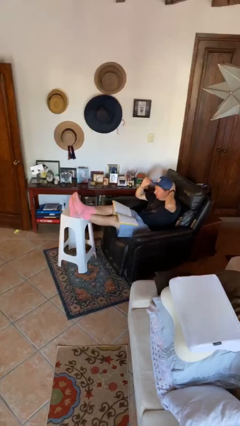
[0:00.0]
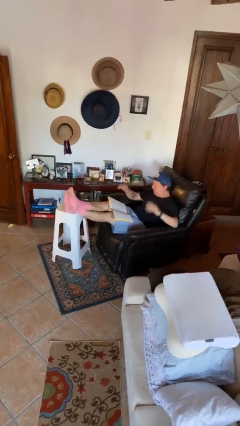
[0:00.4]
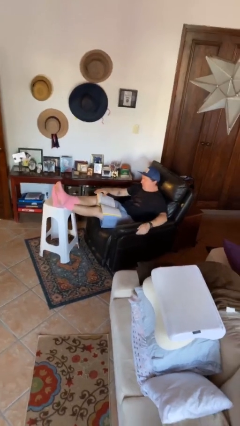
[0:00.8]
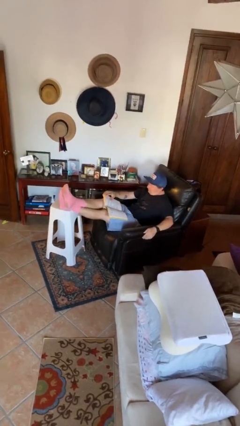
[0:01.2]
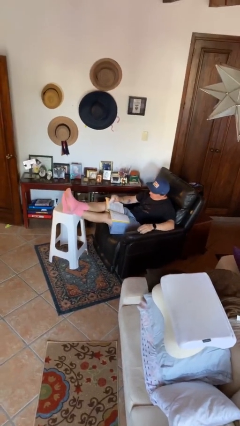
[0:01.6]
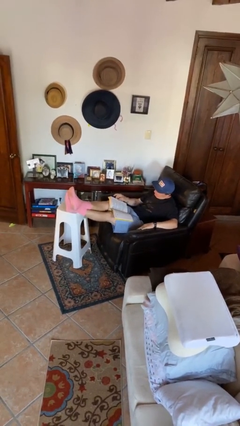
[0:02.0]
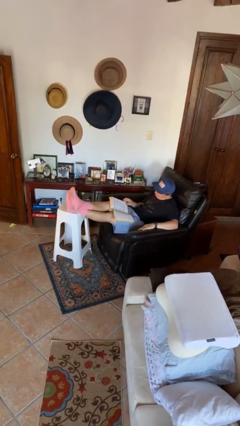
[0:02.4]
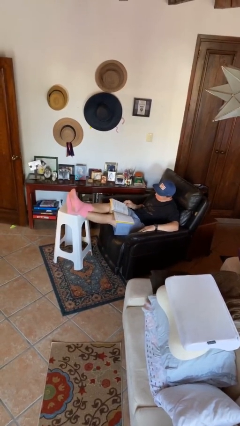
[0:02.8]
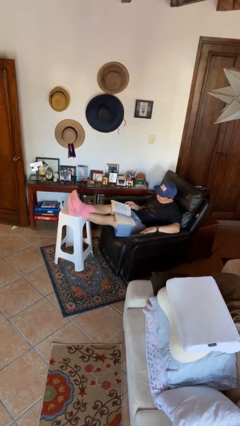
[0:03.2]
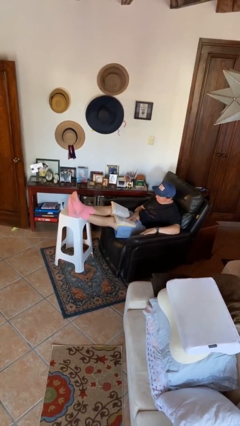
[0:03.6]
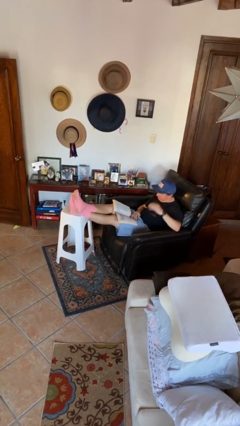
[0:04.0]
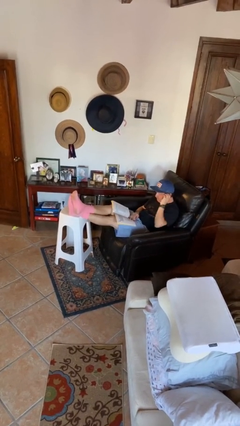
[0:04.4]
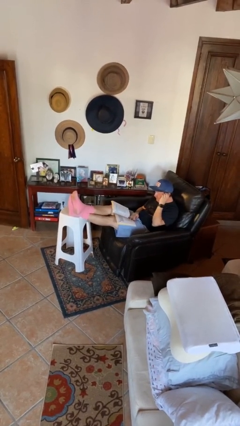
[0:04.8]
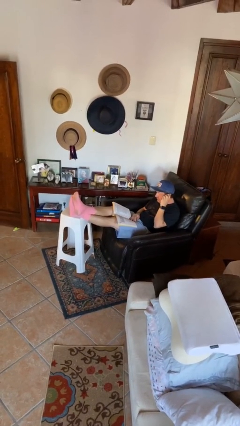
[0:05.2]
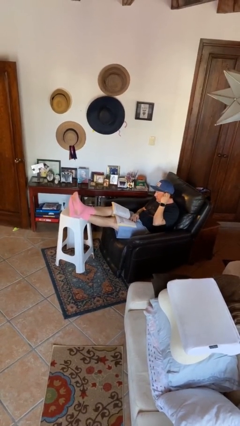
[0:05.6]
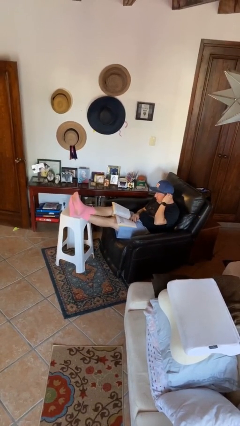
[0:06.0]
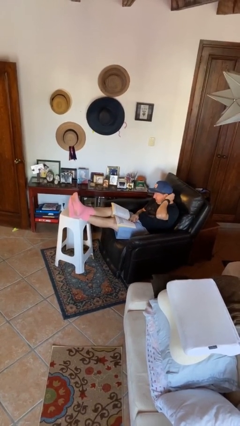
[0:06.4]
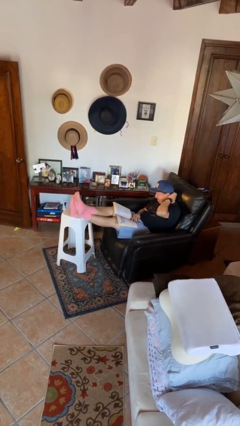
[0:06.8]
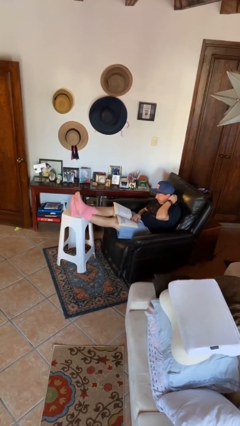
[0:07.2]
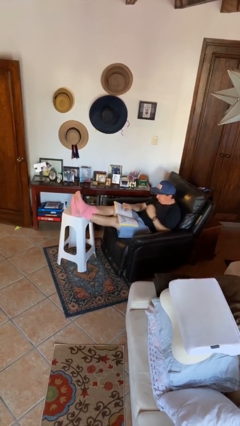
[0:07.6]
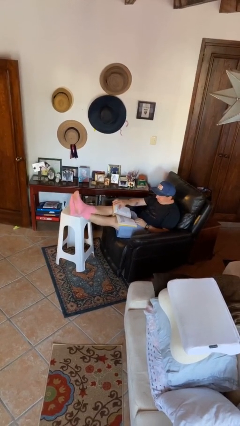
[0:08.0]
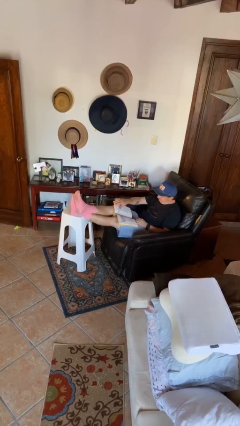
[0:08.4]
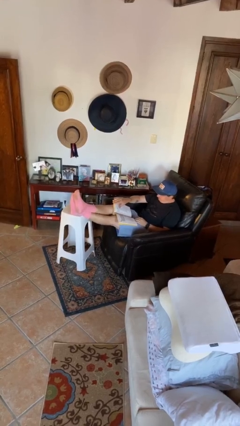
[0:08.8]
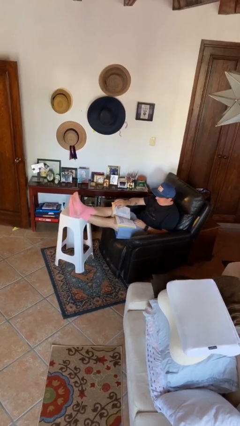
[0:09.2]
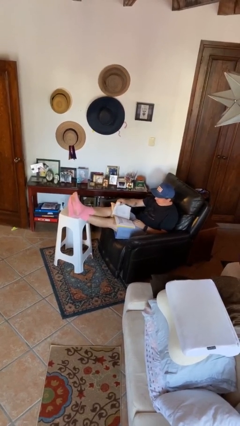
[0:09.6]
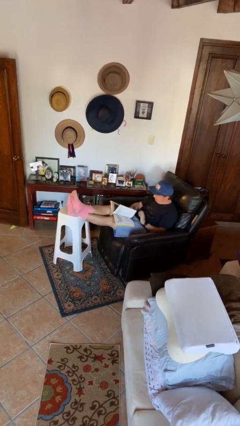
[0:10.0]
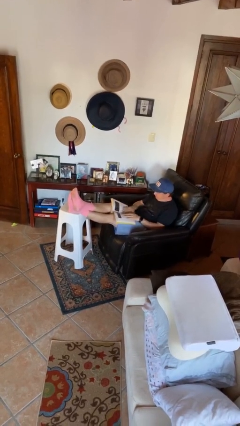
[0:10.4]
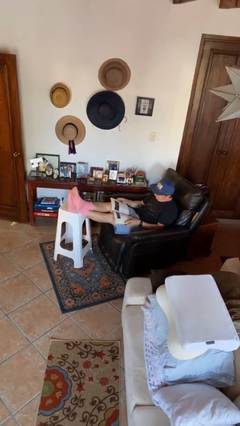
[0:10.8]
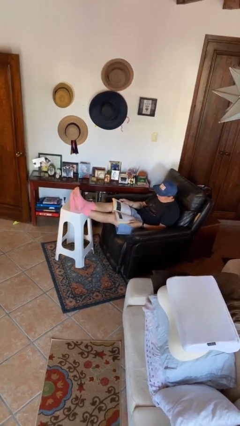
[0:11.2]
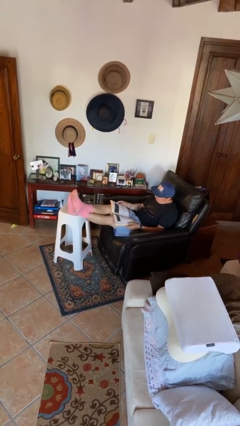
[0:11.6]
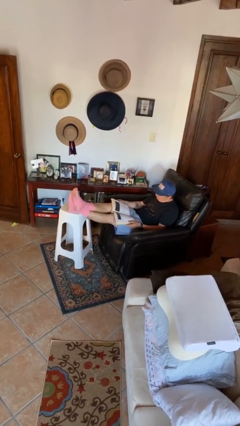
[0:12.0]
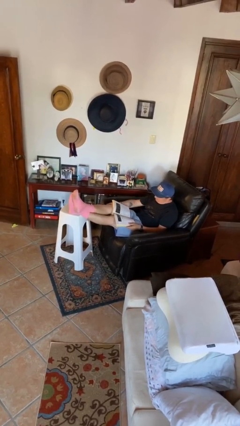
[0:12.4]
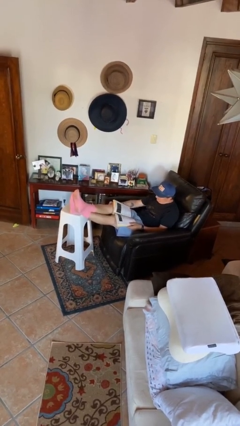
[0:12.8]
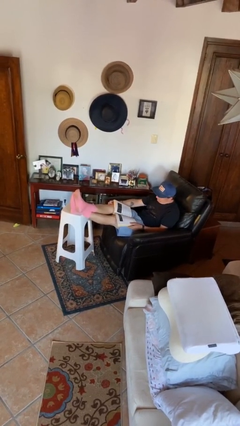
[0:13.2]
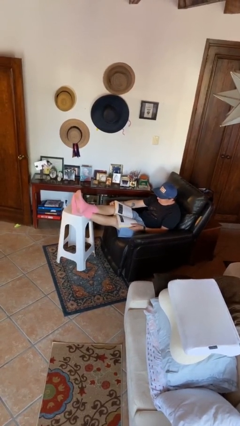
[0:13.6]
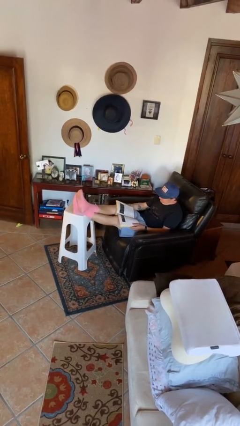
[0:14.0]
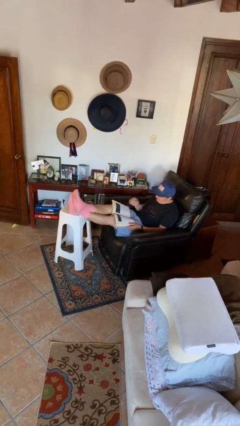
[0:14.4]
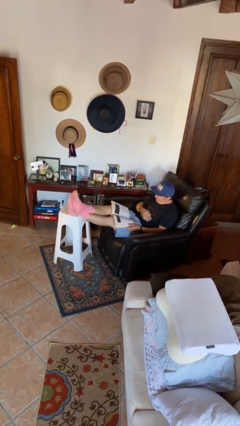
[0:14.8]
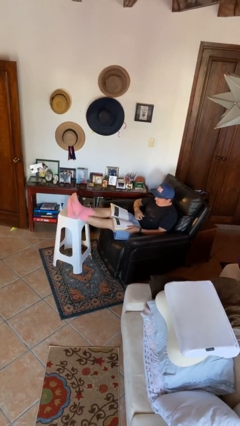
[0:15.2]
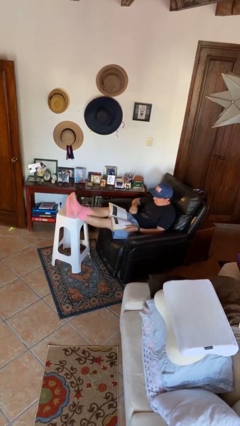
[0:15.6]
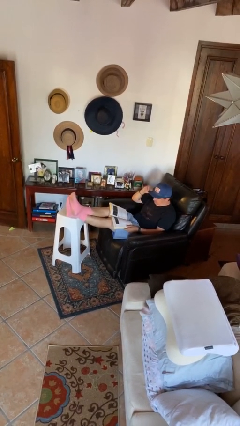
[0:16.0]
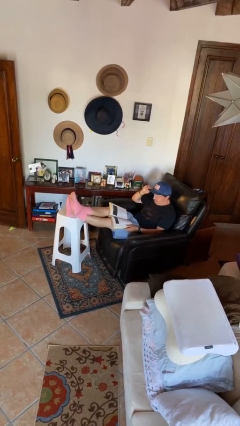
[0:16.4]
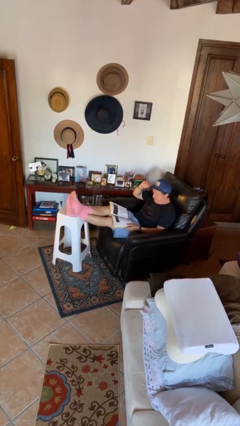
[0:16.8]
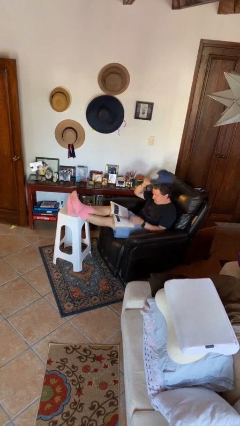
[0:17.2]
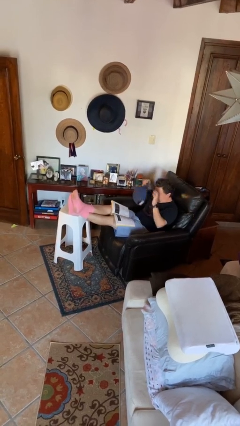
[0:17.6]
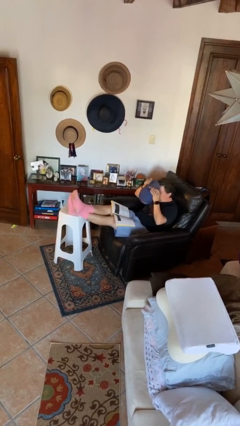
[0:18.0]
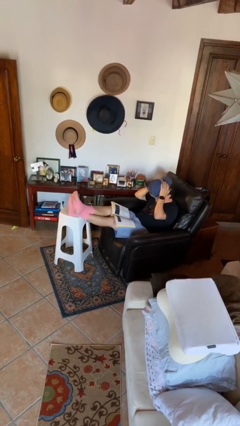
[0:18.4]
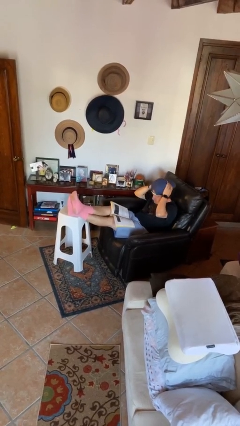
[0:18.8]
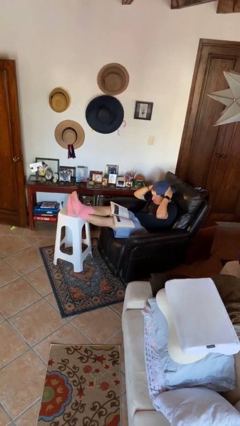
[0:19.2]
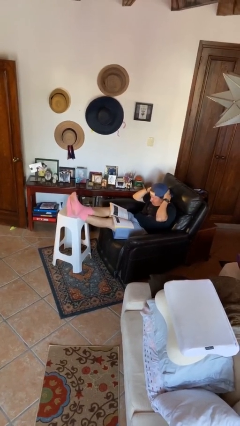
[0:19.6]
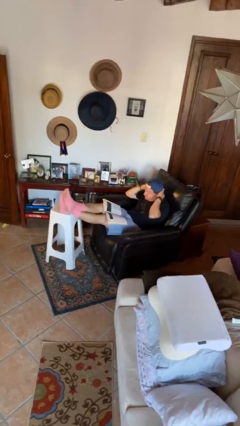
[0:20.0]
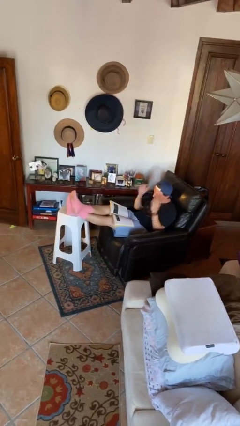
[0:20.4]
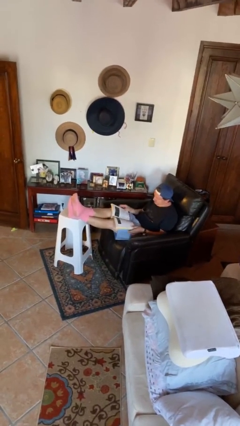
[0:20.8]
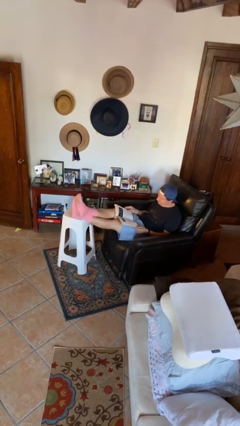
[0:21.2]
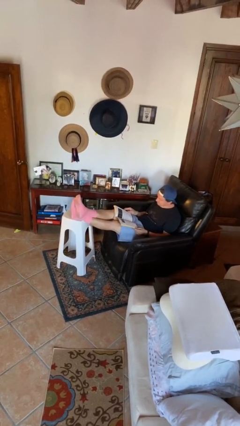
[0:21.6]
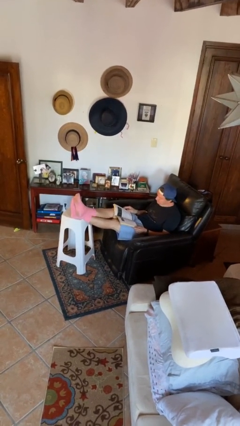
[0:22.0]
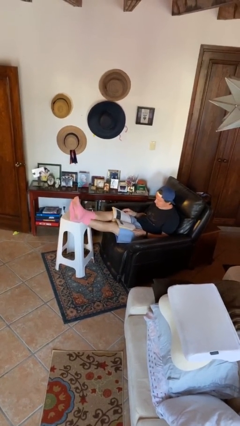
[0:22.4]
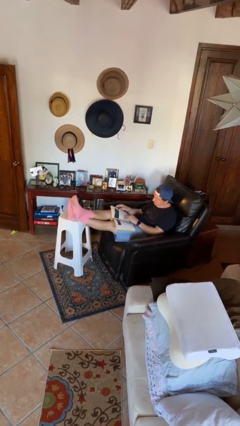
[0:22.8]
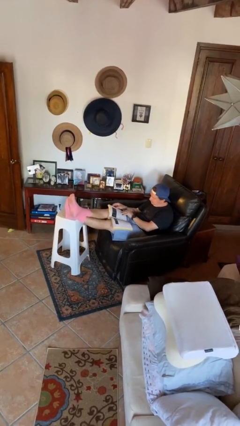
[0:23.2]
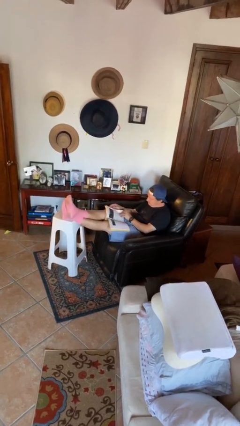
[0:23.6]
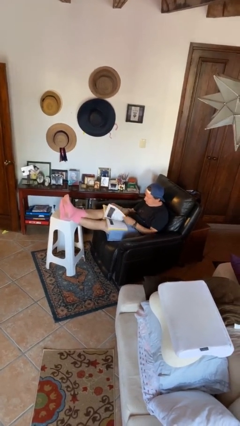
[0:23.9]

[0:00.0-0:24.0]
person reads document

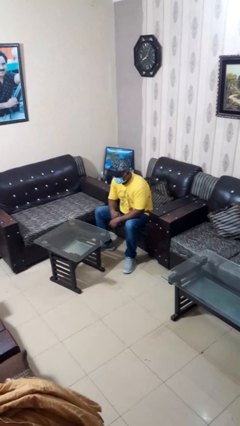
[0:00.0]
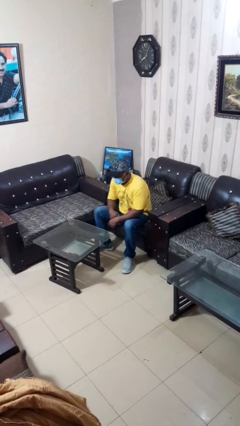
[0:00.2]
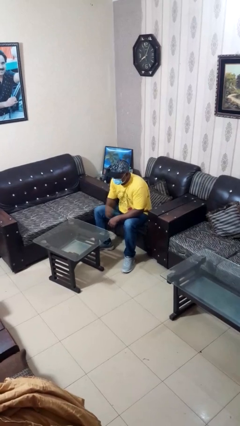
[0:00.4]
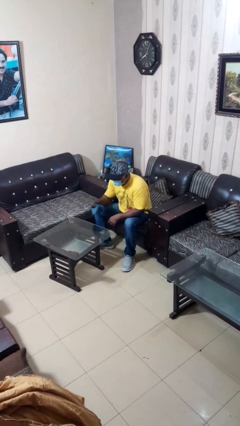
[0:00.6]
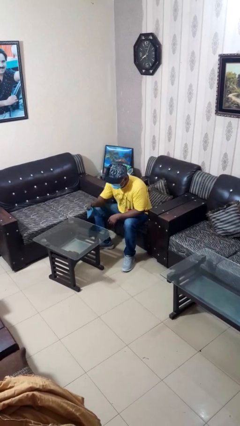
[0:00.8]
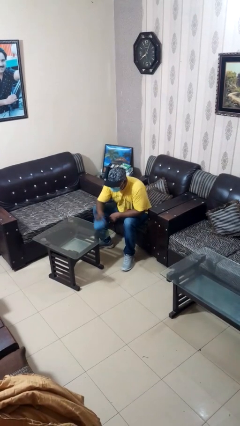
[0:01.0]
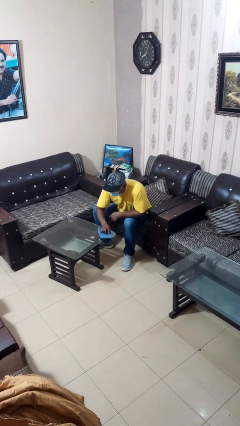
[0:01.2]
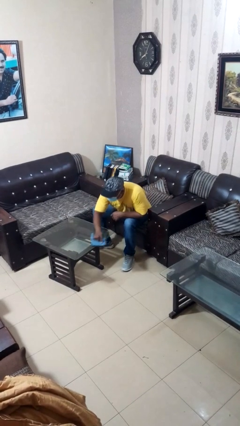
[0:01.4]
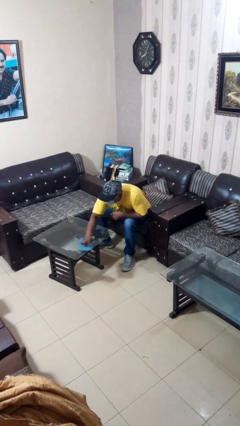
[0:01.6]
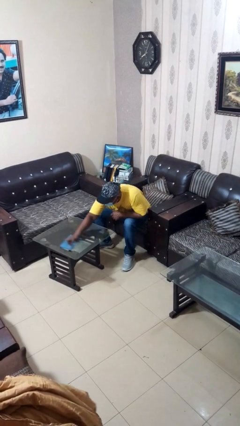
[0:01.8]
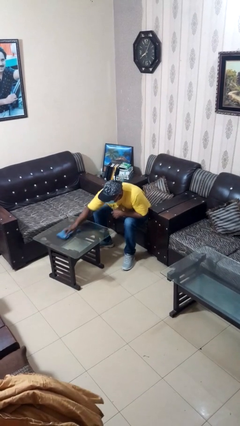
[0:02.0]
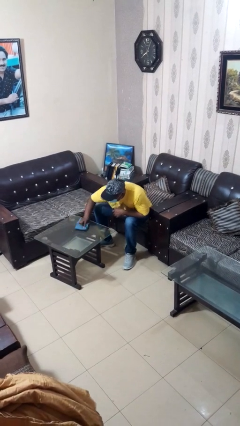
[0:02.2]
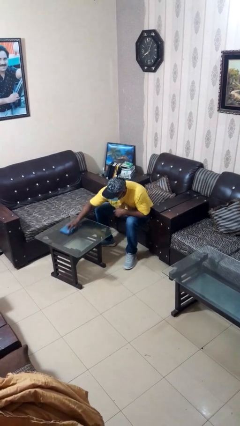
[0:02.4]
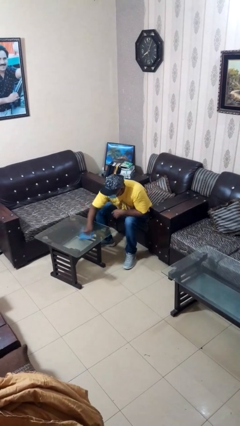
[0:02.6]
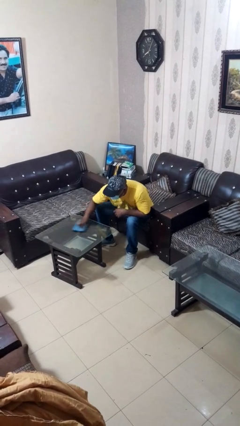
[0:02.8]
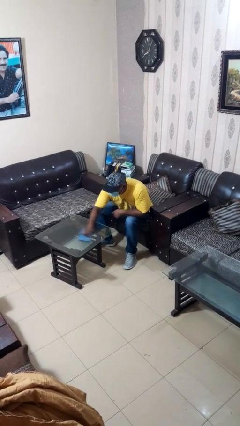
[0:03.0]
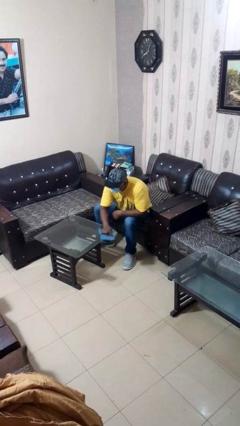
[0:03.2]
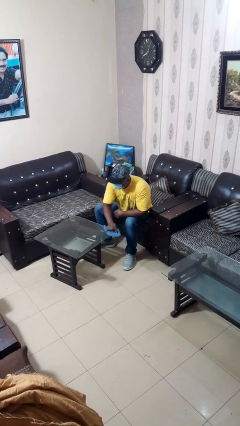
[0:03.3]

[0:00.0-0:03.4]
person cleans table with rag

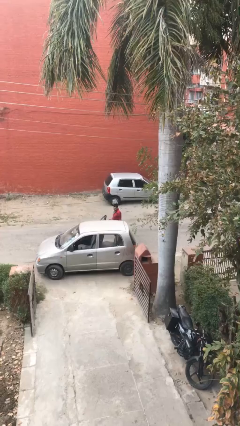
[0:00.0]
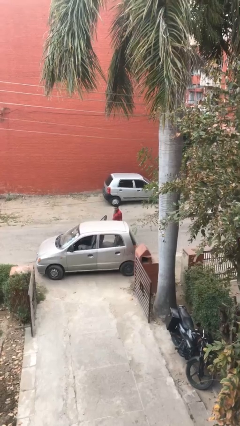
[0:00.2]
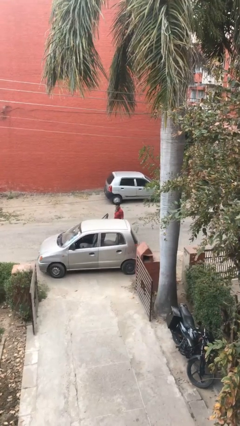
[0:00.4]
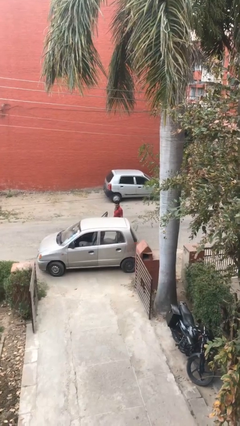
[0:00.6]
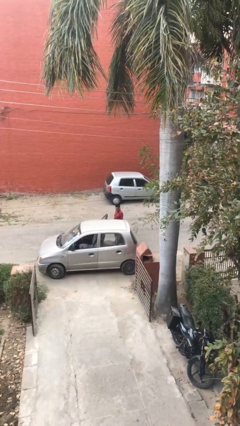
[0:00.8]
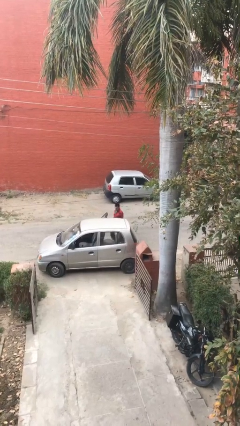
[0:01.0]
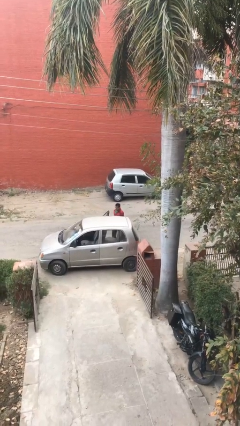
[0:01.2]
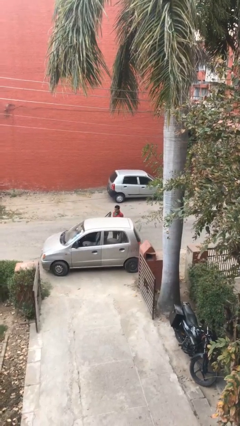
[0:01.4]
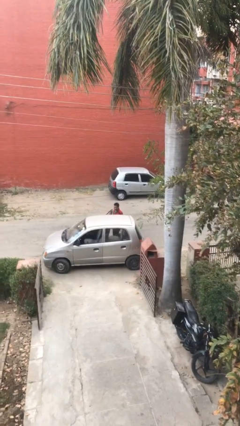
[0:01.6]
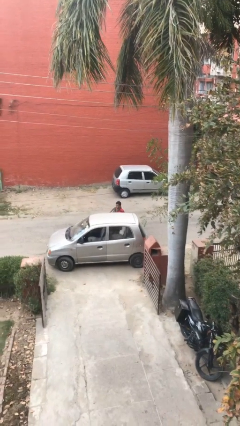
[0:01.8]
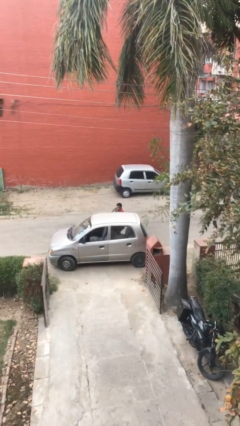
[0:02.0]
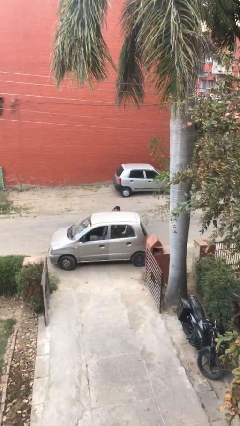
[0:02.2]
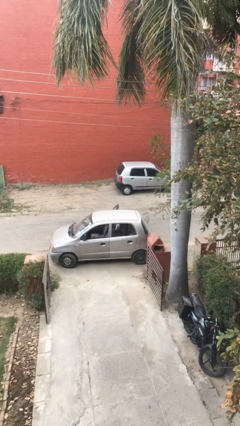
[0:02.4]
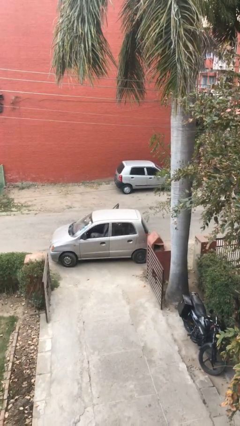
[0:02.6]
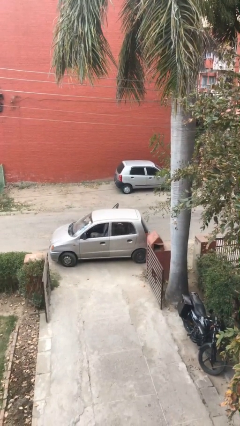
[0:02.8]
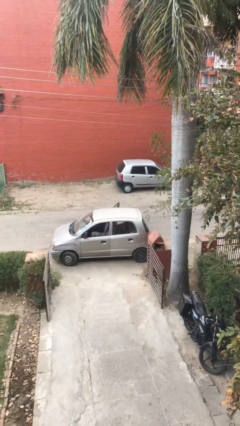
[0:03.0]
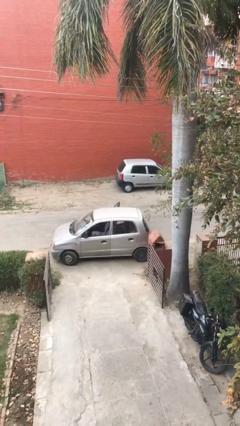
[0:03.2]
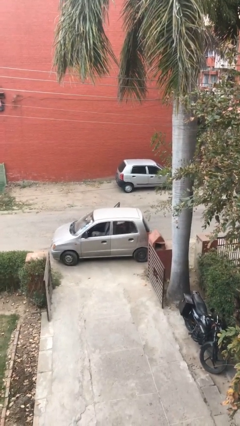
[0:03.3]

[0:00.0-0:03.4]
person enters car
